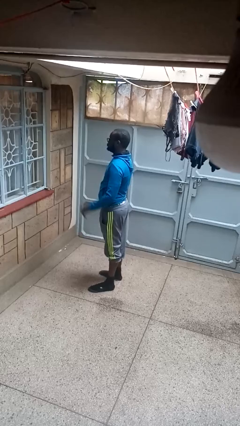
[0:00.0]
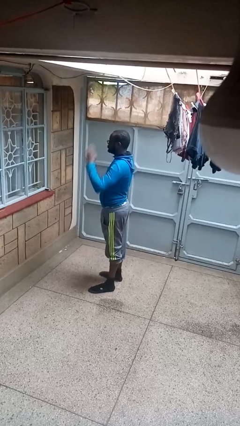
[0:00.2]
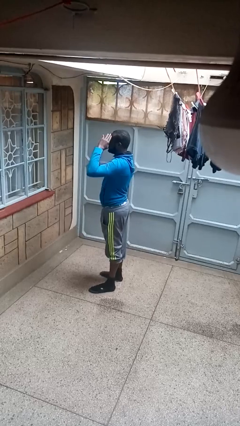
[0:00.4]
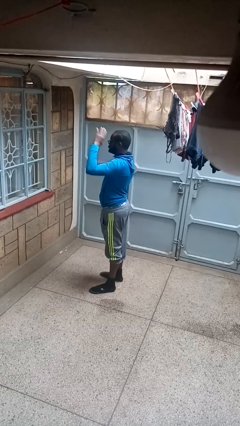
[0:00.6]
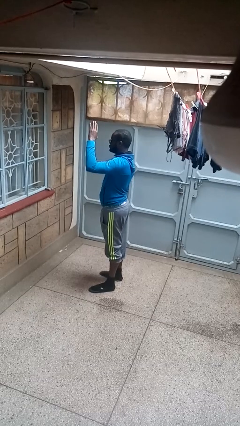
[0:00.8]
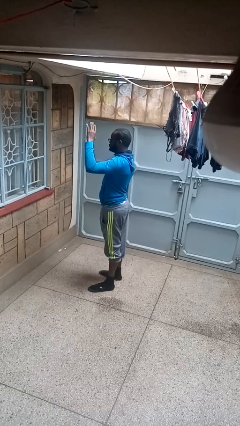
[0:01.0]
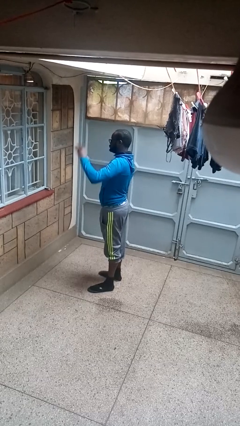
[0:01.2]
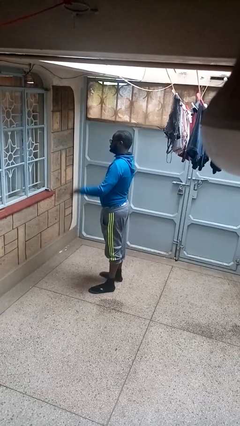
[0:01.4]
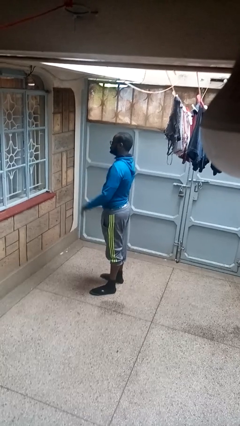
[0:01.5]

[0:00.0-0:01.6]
person salutes

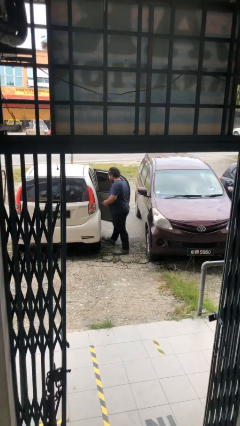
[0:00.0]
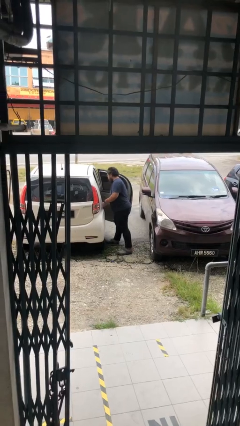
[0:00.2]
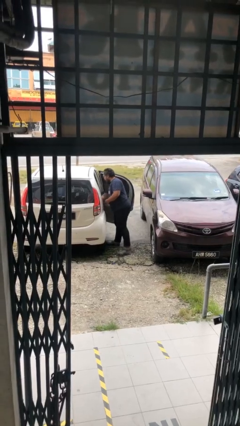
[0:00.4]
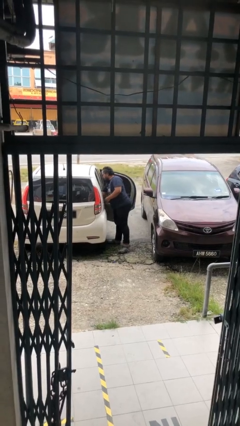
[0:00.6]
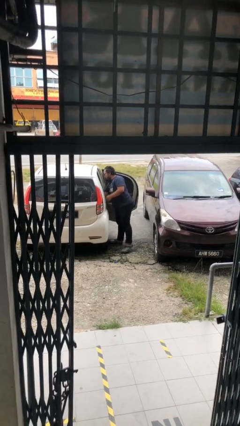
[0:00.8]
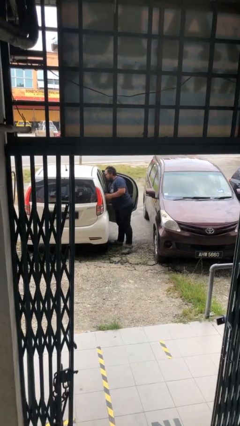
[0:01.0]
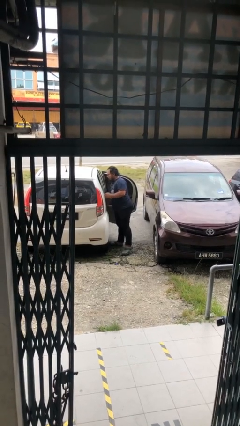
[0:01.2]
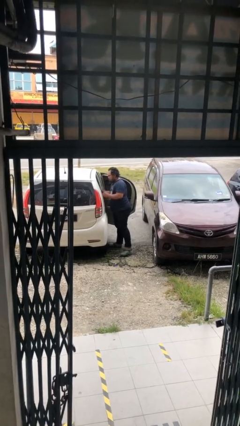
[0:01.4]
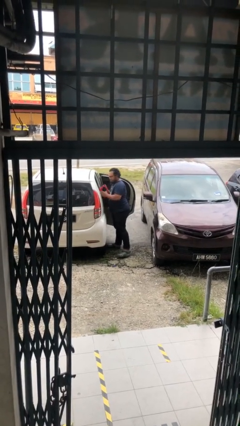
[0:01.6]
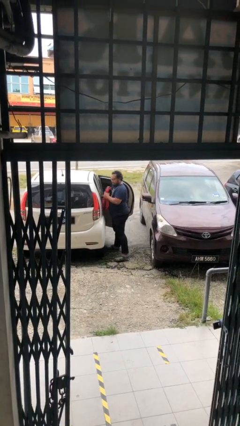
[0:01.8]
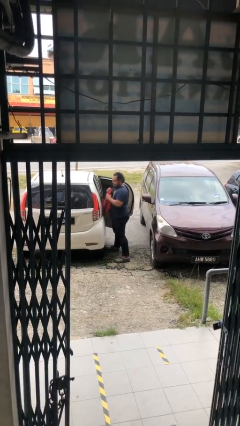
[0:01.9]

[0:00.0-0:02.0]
person unloads car

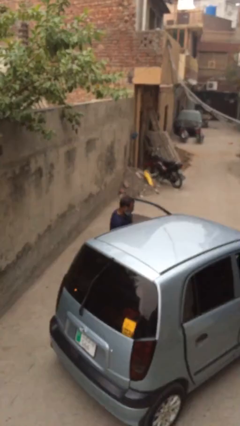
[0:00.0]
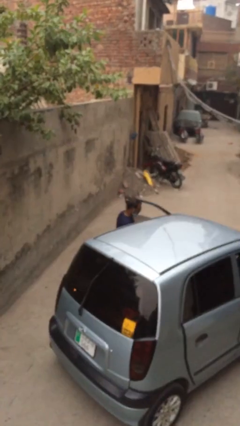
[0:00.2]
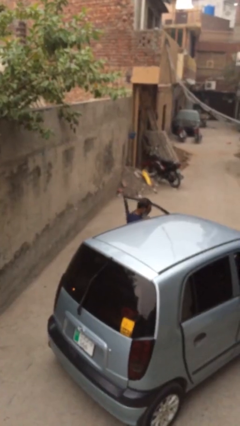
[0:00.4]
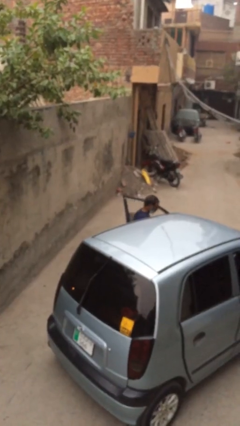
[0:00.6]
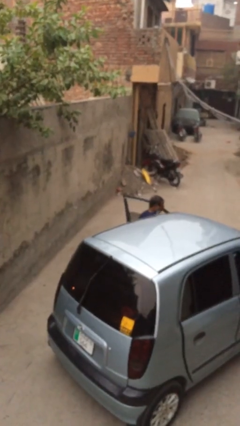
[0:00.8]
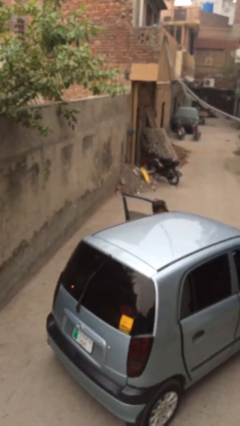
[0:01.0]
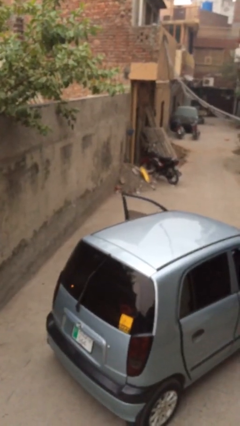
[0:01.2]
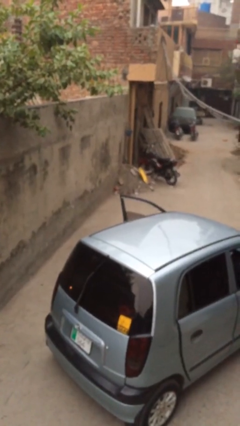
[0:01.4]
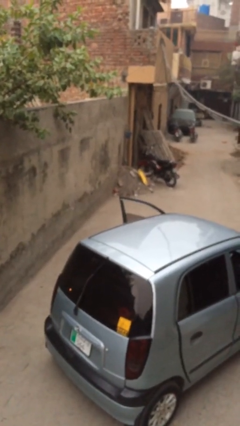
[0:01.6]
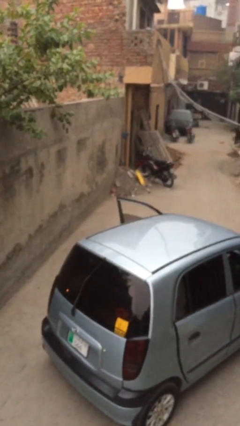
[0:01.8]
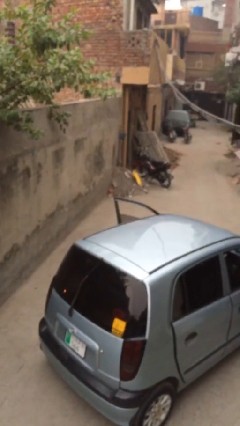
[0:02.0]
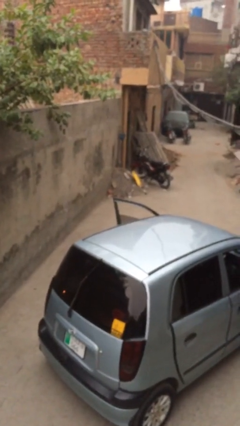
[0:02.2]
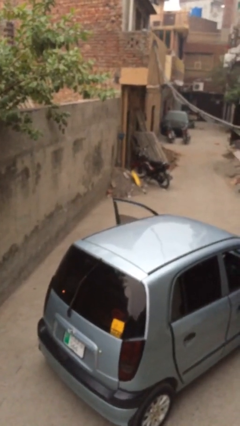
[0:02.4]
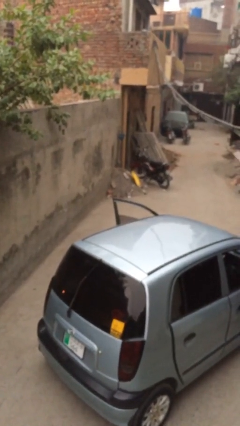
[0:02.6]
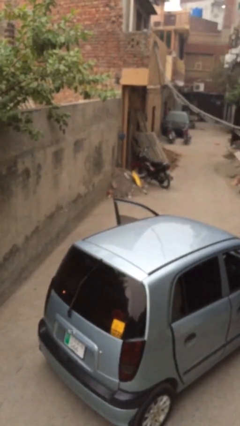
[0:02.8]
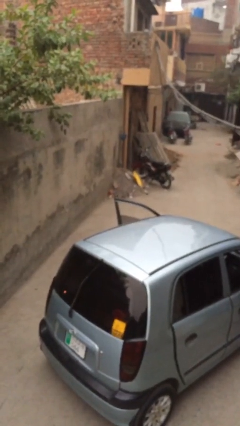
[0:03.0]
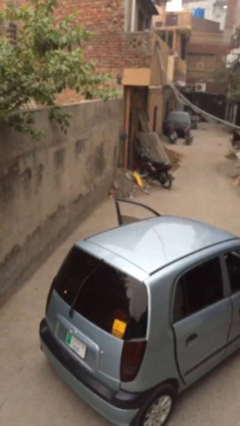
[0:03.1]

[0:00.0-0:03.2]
person enters car

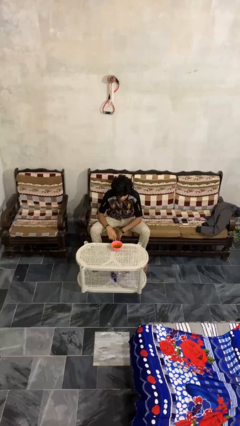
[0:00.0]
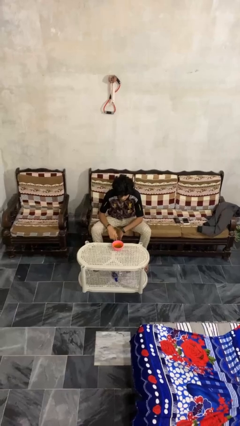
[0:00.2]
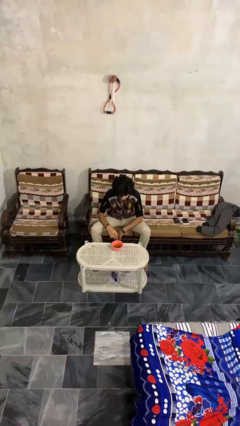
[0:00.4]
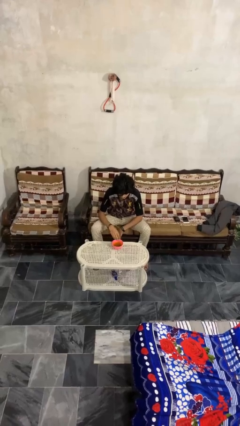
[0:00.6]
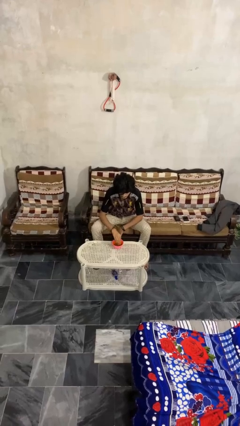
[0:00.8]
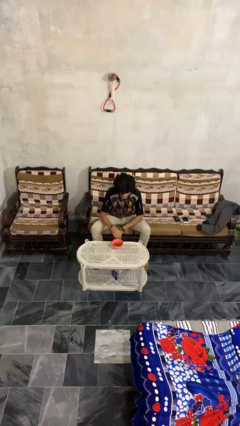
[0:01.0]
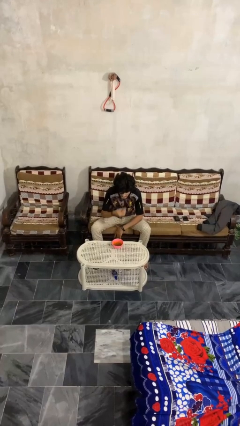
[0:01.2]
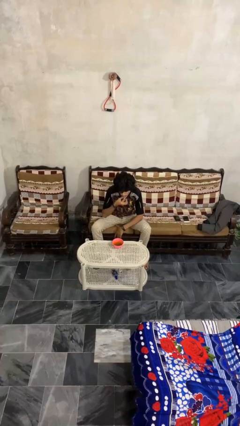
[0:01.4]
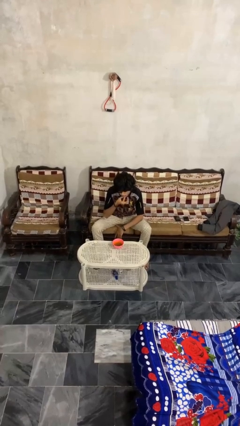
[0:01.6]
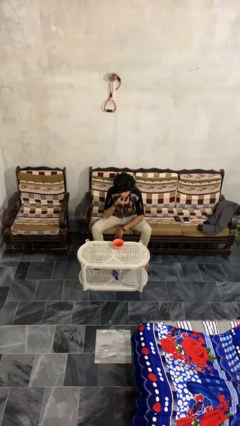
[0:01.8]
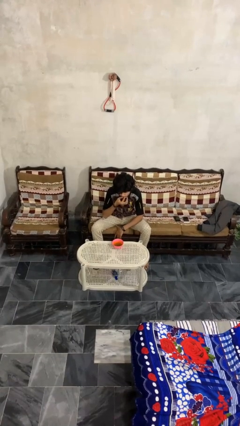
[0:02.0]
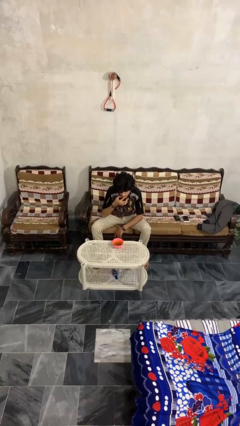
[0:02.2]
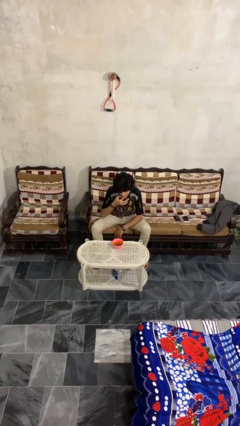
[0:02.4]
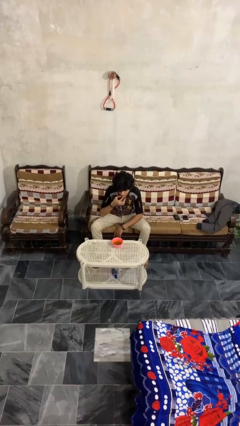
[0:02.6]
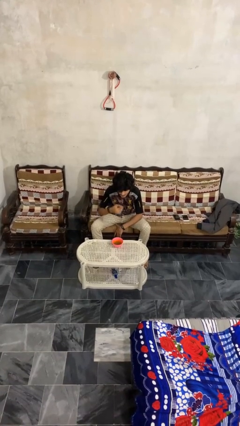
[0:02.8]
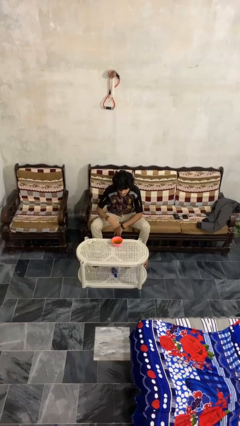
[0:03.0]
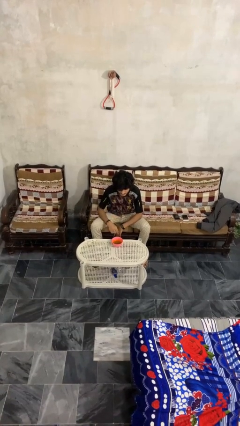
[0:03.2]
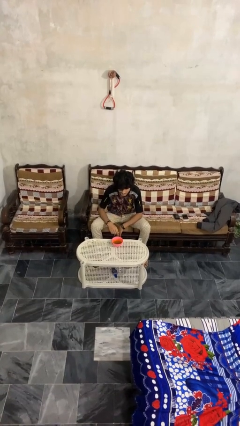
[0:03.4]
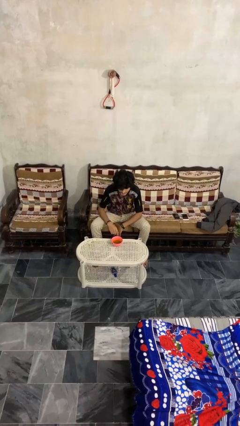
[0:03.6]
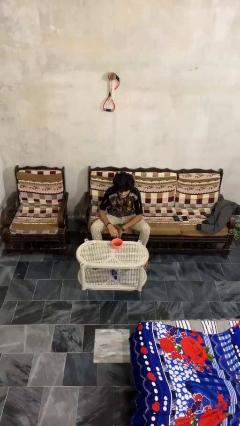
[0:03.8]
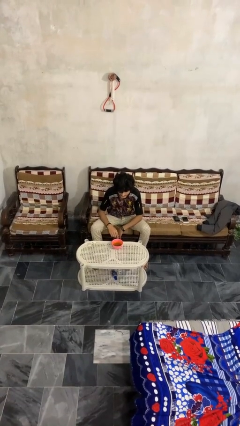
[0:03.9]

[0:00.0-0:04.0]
person eats with hands

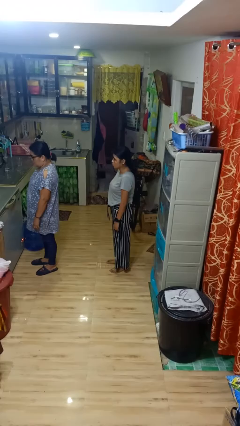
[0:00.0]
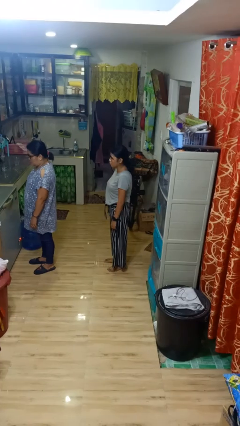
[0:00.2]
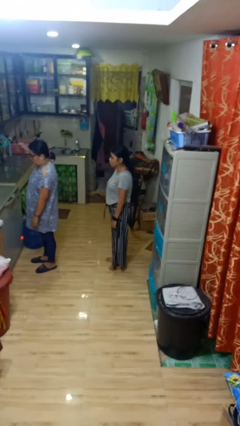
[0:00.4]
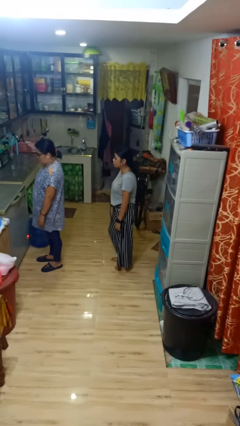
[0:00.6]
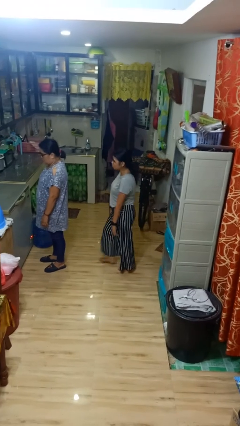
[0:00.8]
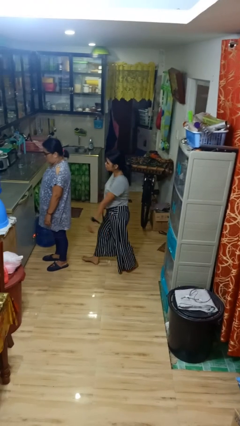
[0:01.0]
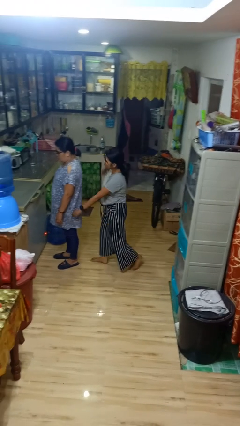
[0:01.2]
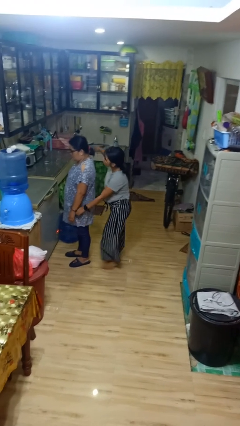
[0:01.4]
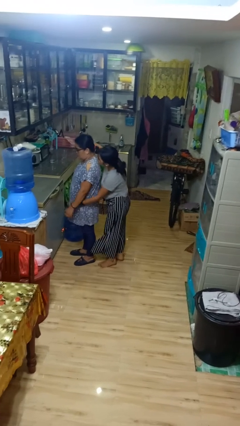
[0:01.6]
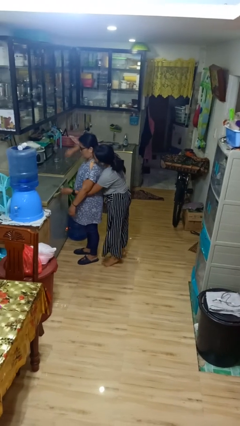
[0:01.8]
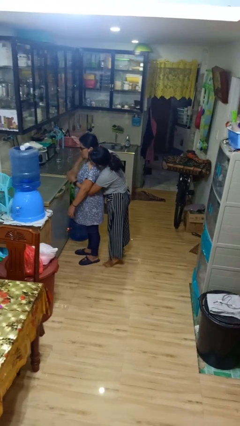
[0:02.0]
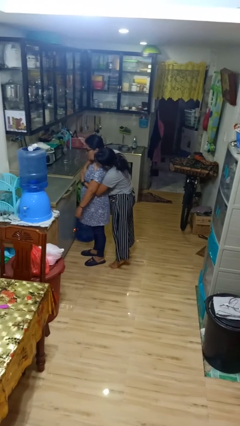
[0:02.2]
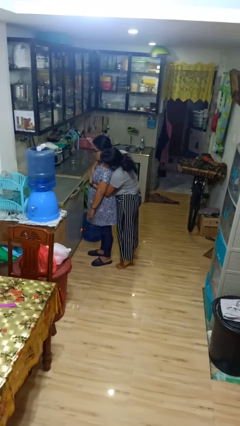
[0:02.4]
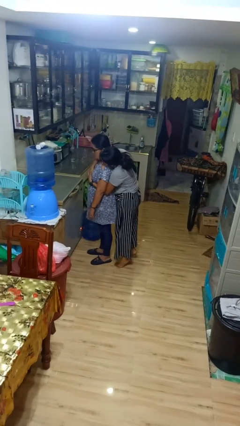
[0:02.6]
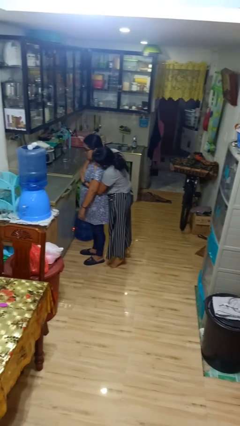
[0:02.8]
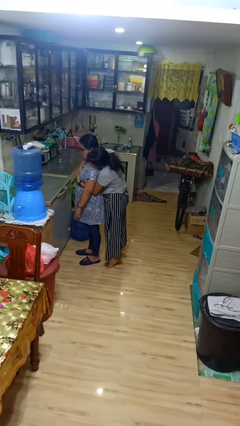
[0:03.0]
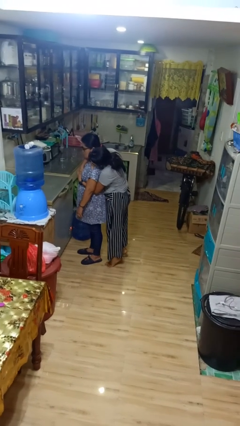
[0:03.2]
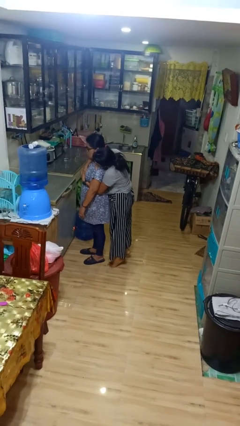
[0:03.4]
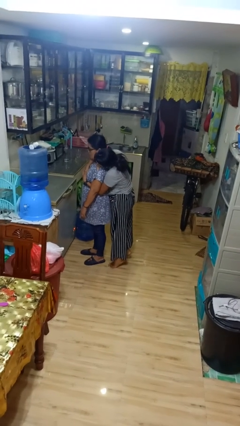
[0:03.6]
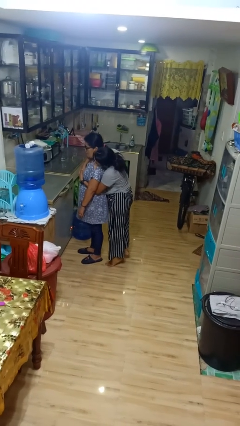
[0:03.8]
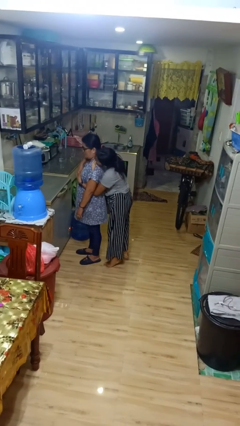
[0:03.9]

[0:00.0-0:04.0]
person hugs person from behind

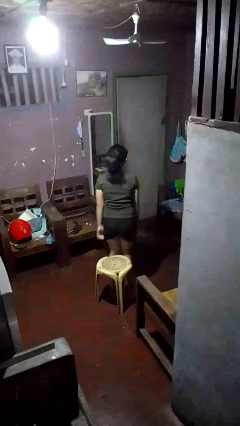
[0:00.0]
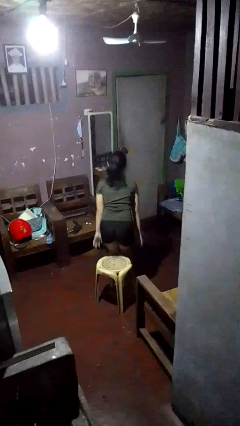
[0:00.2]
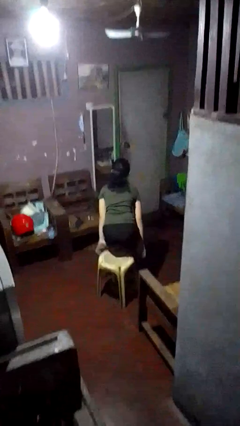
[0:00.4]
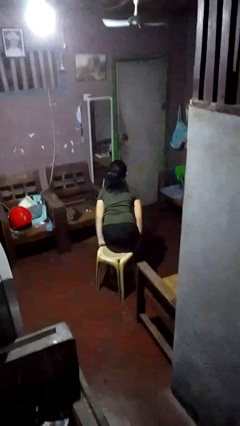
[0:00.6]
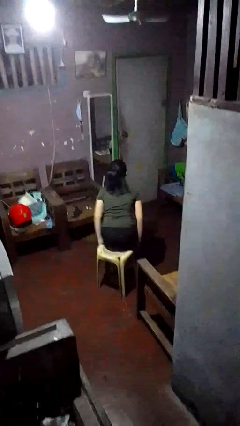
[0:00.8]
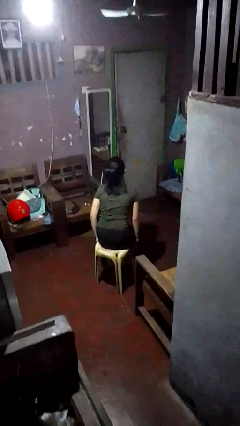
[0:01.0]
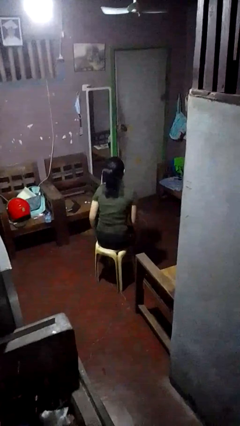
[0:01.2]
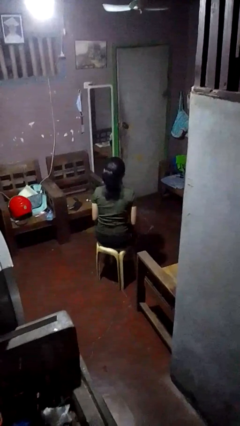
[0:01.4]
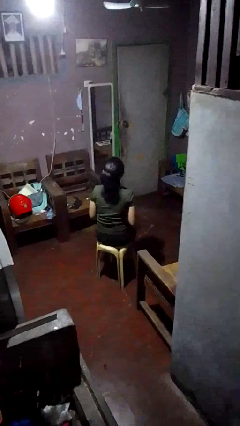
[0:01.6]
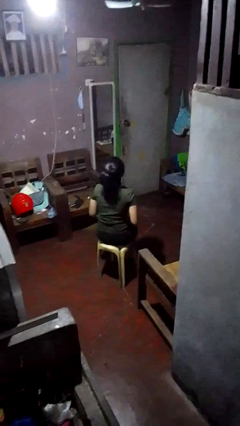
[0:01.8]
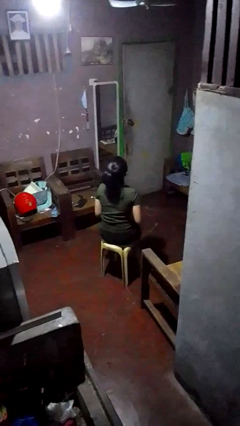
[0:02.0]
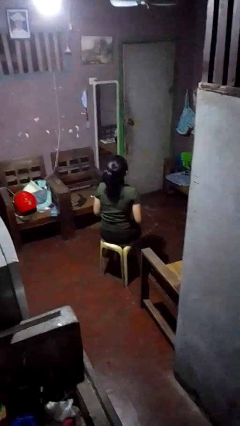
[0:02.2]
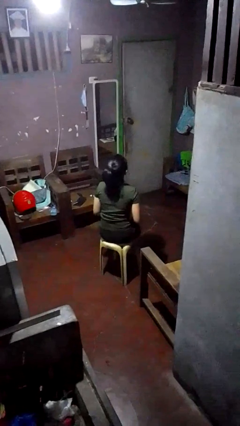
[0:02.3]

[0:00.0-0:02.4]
person sits down
